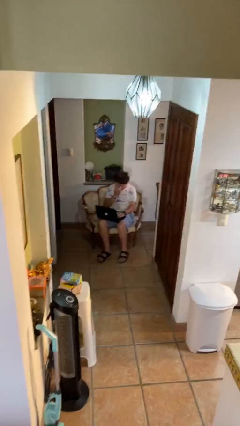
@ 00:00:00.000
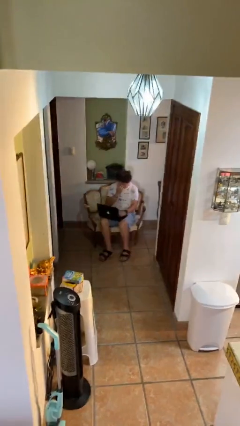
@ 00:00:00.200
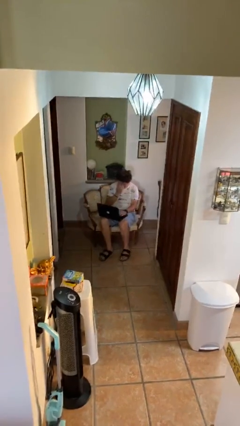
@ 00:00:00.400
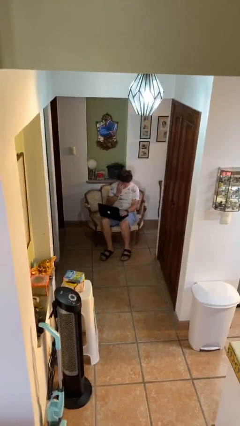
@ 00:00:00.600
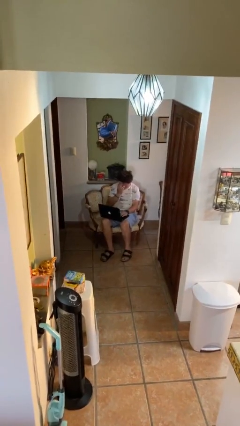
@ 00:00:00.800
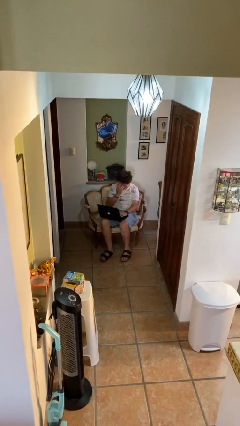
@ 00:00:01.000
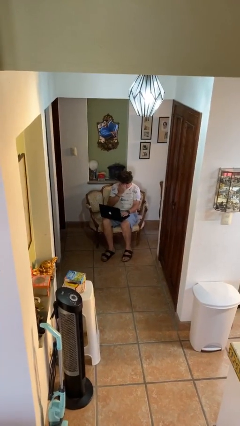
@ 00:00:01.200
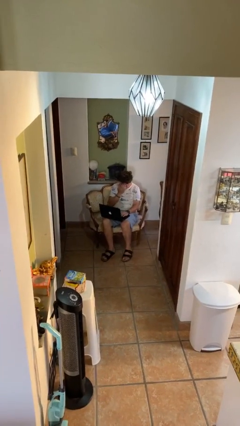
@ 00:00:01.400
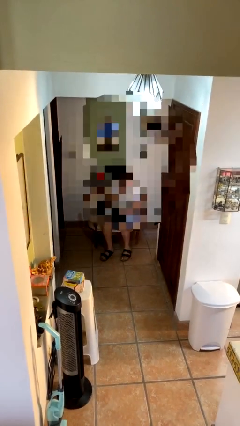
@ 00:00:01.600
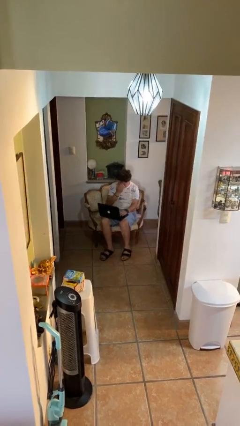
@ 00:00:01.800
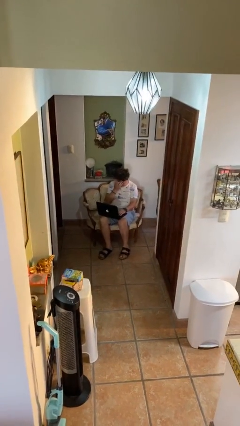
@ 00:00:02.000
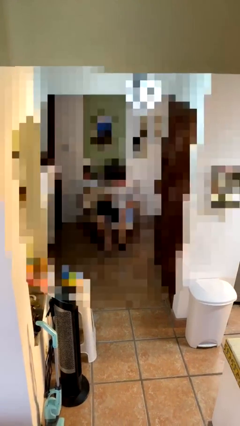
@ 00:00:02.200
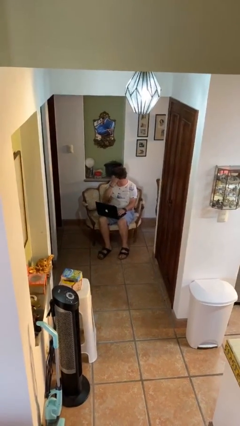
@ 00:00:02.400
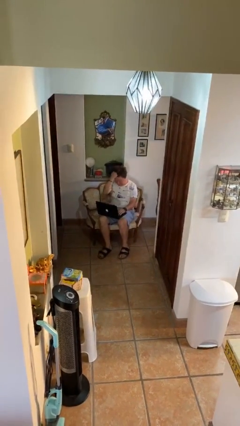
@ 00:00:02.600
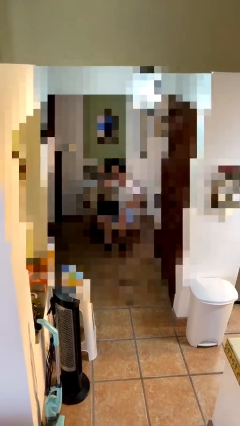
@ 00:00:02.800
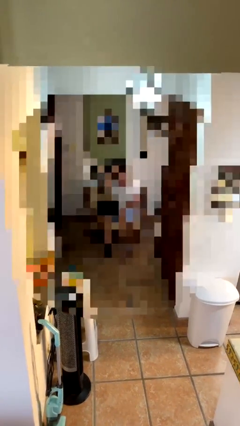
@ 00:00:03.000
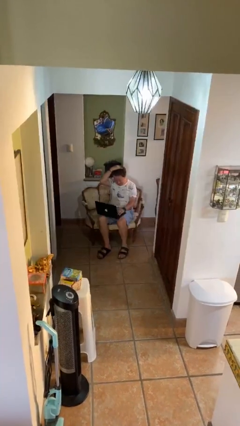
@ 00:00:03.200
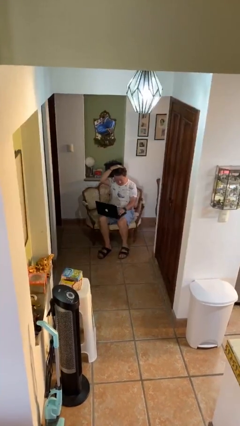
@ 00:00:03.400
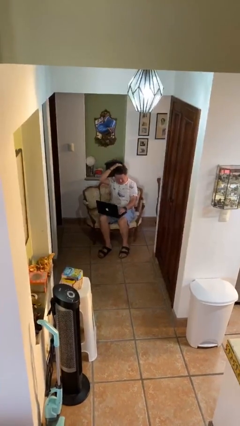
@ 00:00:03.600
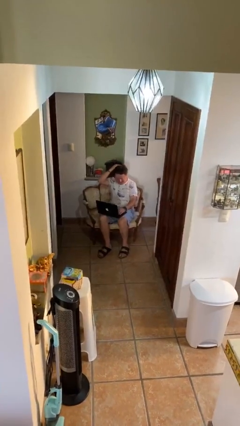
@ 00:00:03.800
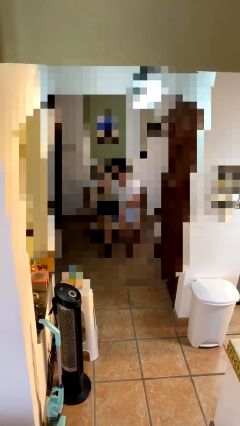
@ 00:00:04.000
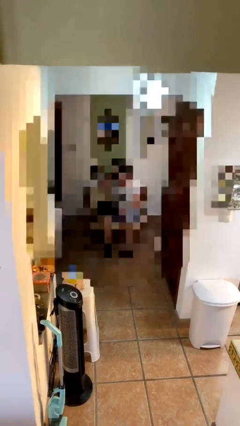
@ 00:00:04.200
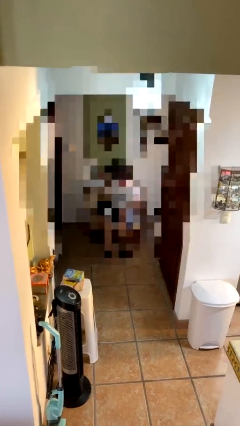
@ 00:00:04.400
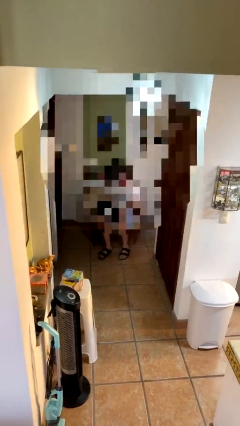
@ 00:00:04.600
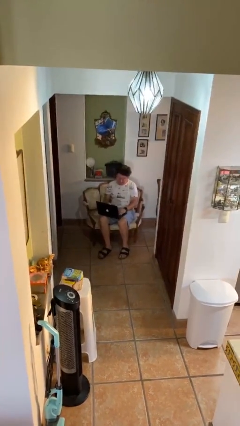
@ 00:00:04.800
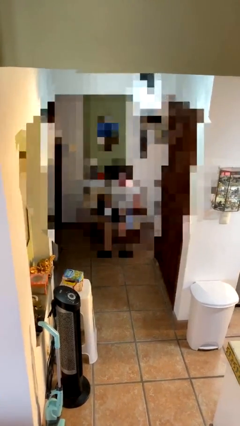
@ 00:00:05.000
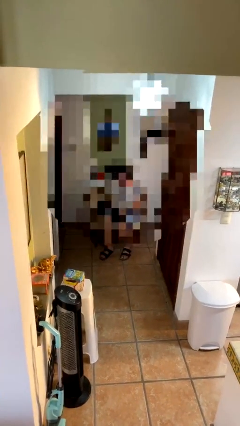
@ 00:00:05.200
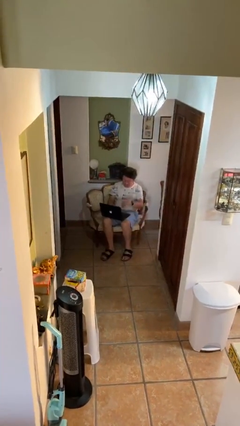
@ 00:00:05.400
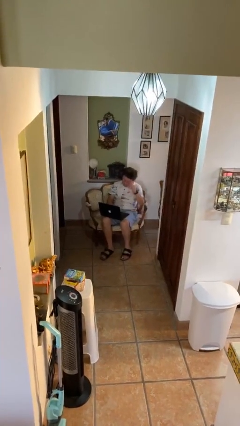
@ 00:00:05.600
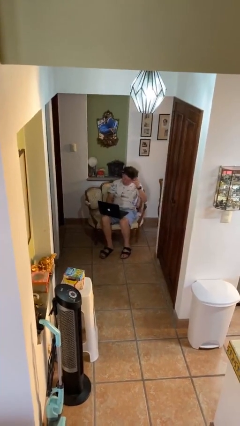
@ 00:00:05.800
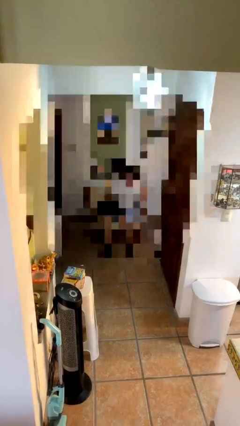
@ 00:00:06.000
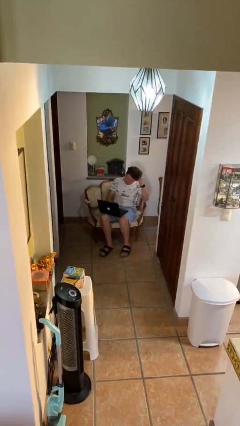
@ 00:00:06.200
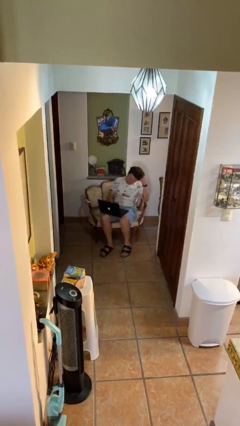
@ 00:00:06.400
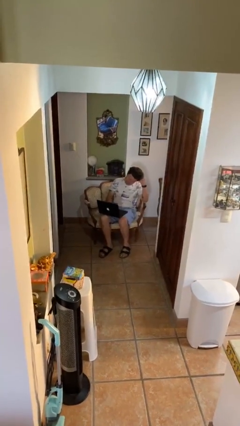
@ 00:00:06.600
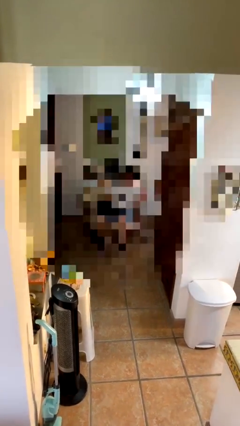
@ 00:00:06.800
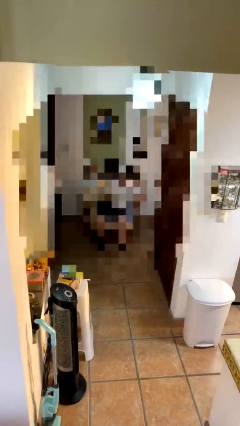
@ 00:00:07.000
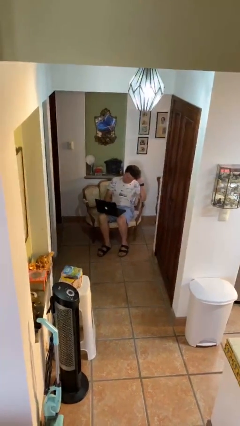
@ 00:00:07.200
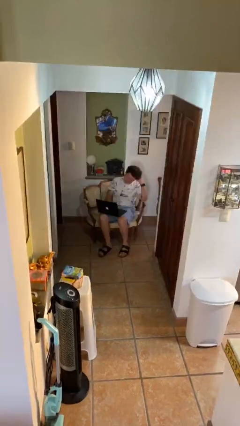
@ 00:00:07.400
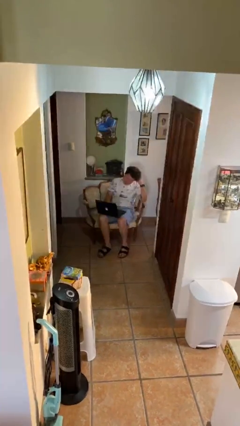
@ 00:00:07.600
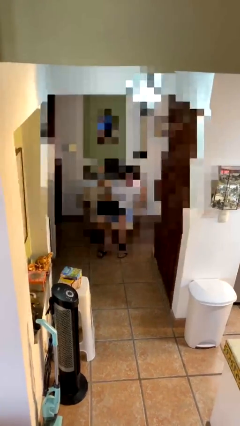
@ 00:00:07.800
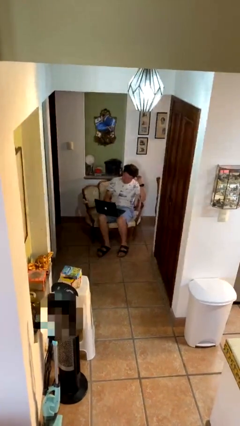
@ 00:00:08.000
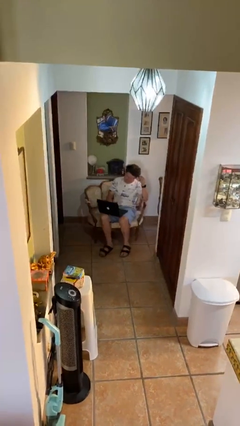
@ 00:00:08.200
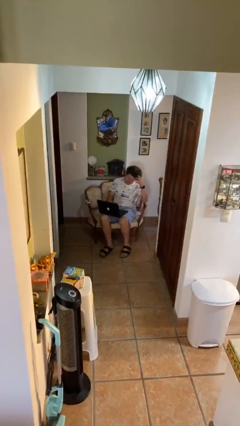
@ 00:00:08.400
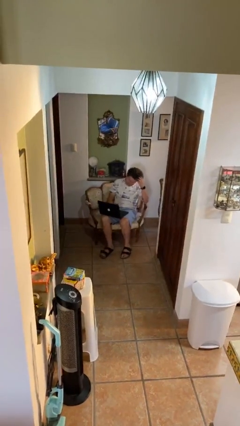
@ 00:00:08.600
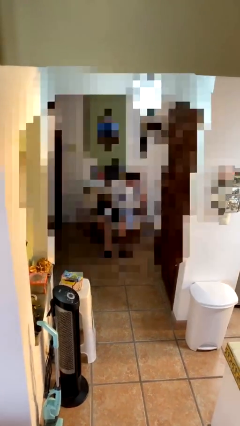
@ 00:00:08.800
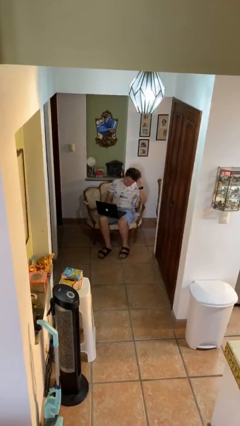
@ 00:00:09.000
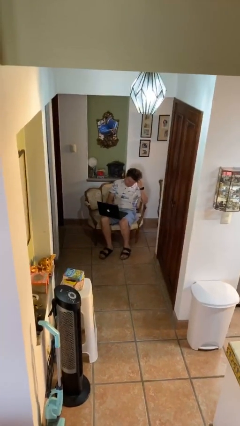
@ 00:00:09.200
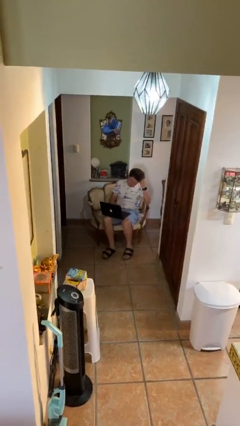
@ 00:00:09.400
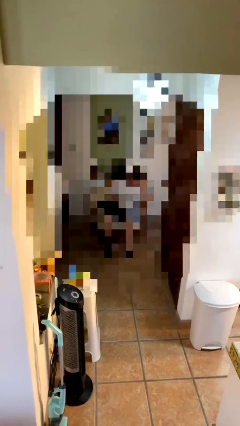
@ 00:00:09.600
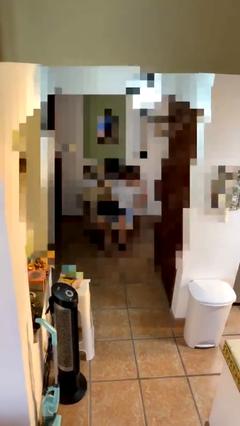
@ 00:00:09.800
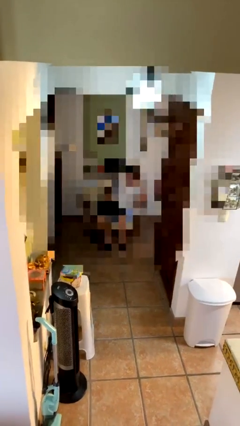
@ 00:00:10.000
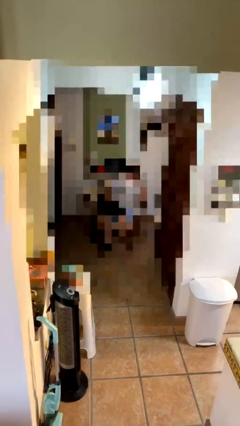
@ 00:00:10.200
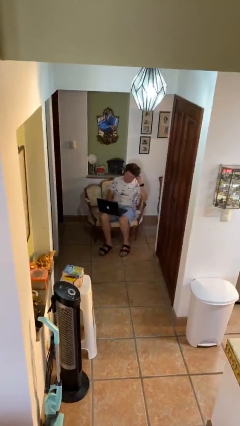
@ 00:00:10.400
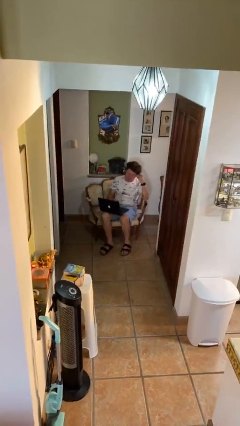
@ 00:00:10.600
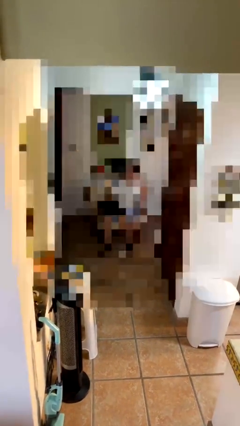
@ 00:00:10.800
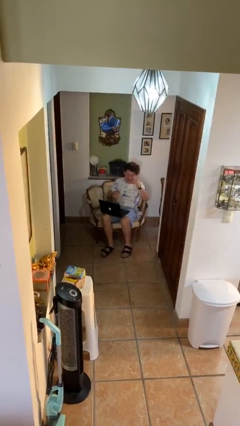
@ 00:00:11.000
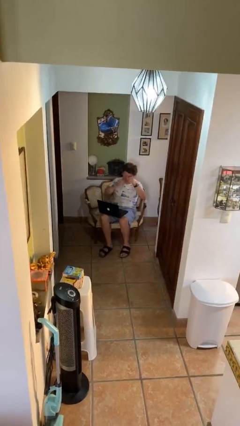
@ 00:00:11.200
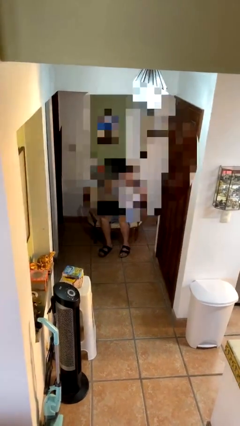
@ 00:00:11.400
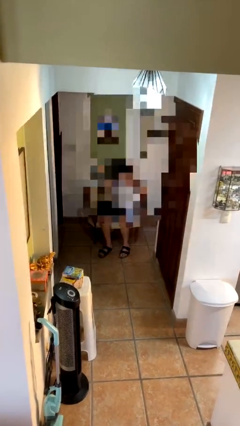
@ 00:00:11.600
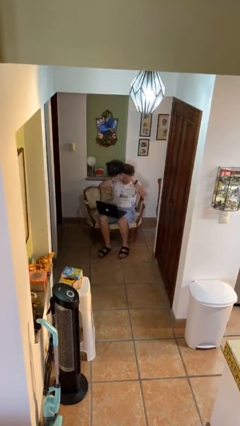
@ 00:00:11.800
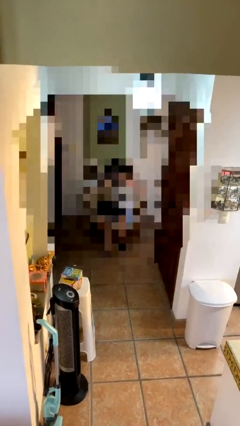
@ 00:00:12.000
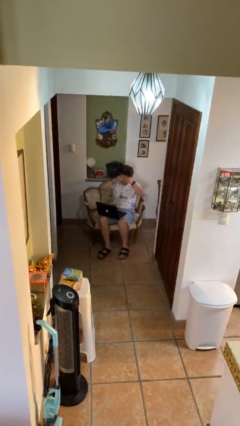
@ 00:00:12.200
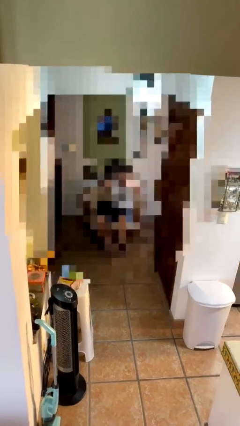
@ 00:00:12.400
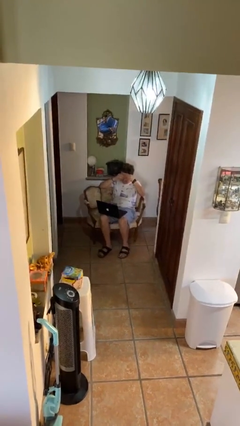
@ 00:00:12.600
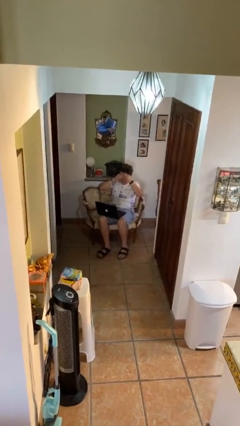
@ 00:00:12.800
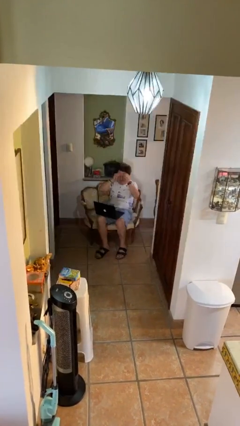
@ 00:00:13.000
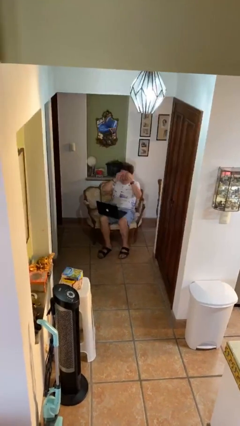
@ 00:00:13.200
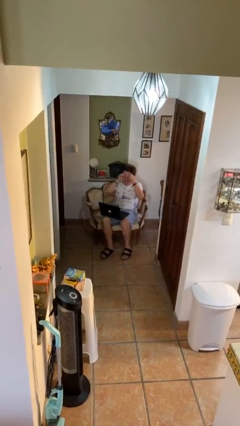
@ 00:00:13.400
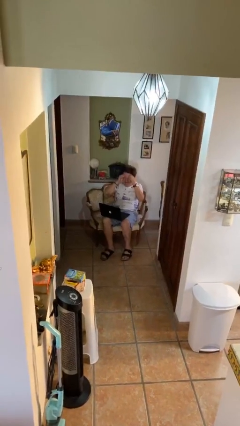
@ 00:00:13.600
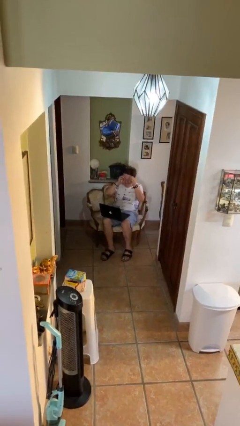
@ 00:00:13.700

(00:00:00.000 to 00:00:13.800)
person interacts with laptop

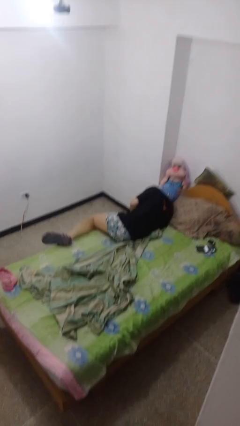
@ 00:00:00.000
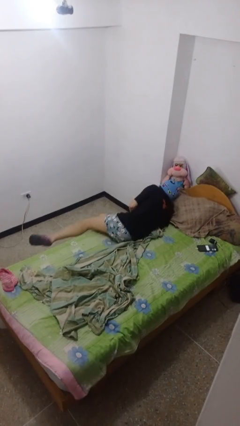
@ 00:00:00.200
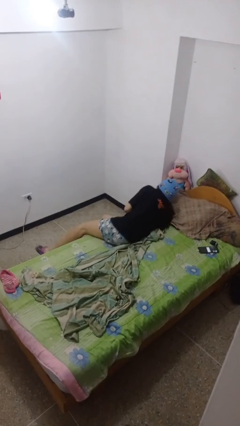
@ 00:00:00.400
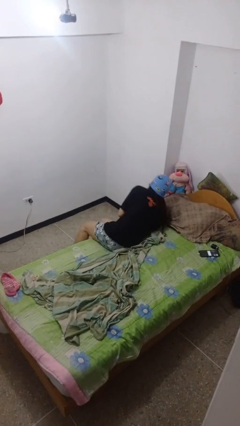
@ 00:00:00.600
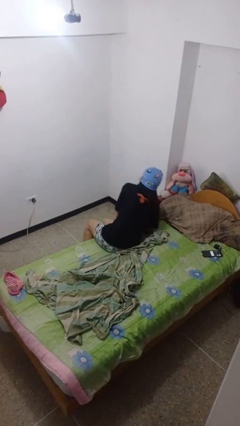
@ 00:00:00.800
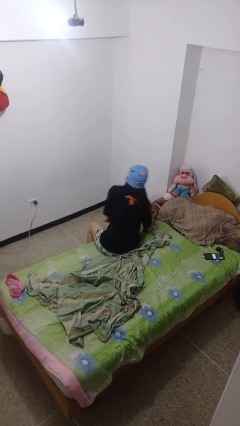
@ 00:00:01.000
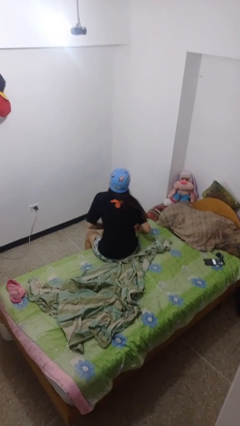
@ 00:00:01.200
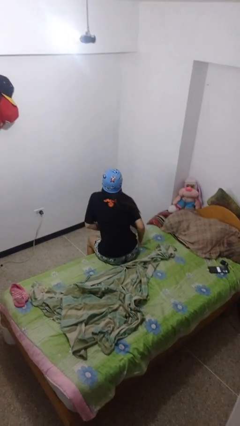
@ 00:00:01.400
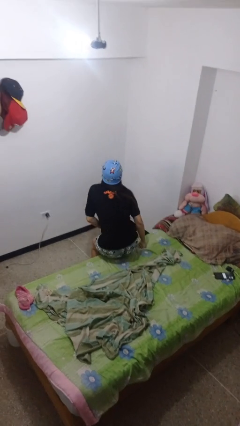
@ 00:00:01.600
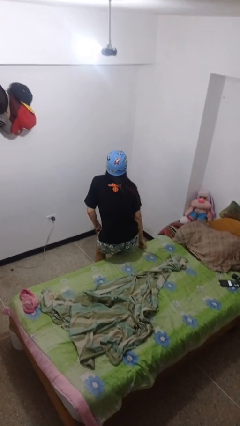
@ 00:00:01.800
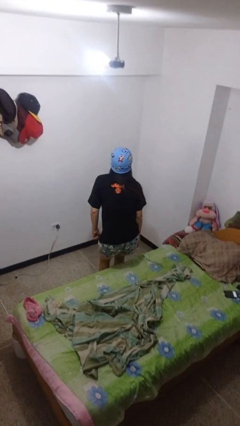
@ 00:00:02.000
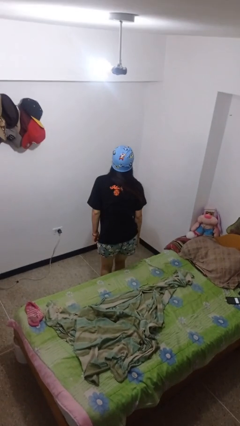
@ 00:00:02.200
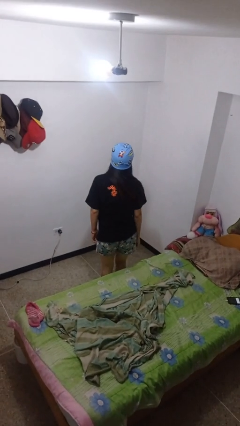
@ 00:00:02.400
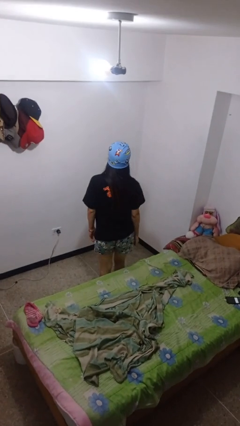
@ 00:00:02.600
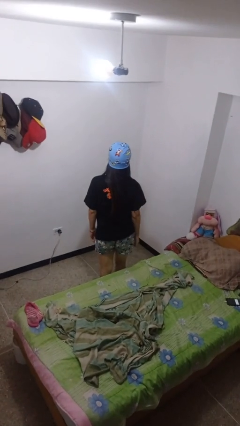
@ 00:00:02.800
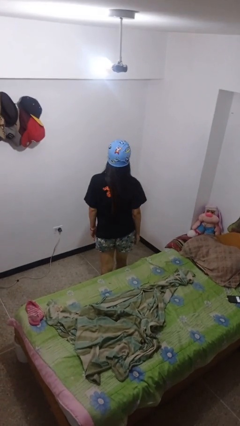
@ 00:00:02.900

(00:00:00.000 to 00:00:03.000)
person stands up

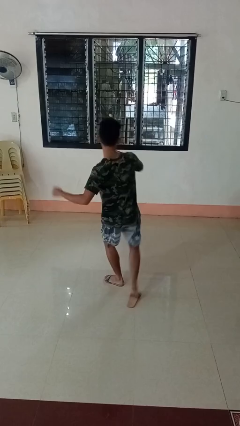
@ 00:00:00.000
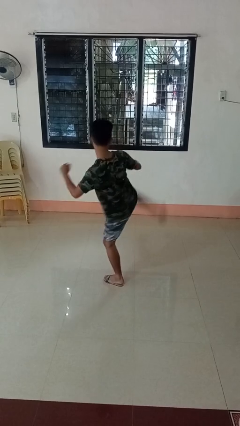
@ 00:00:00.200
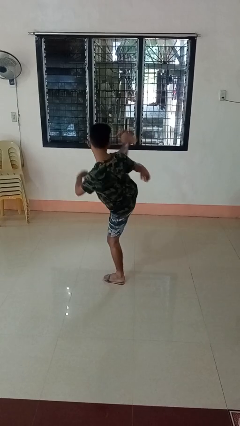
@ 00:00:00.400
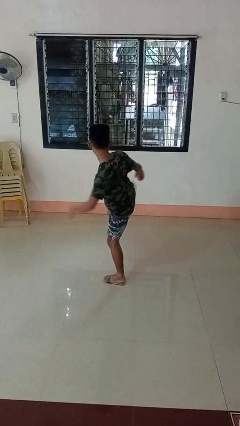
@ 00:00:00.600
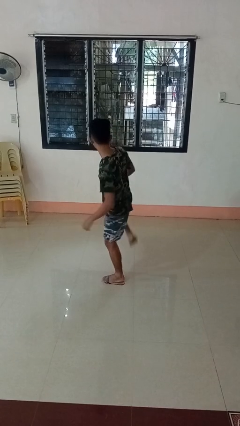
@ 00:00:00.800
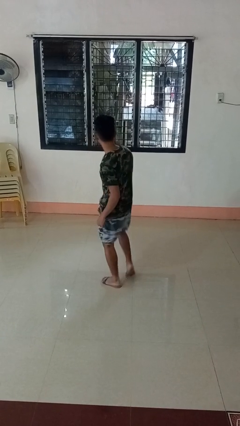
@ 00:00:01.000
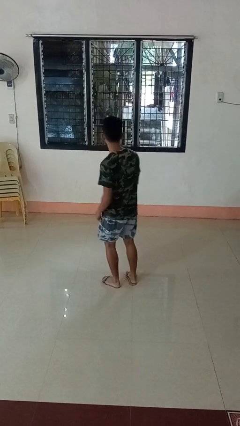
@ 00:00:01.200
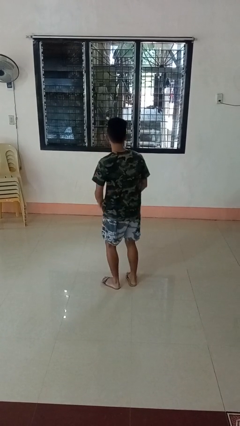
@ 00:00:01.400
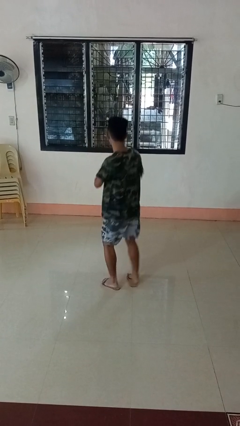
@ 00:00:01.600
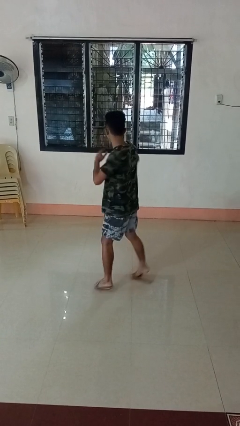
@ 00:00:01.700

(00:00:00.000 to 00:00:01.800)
person karate kicks
